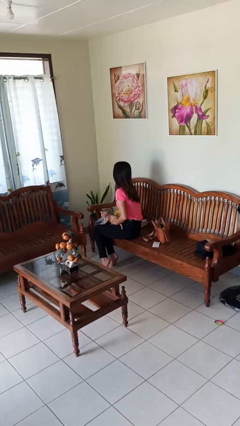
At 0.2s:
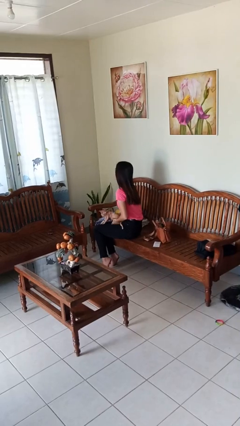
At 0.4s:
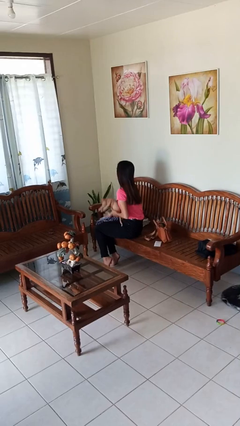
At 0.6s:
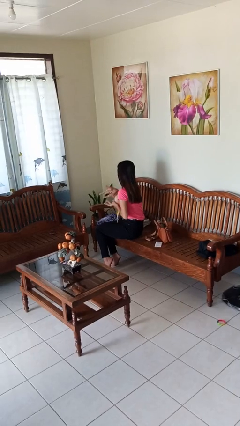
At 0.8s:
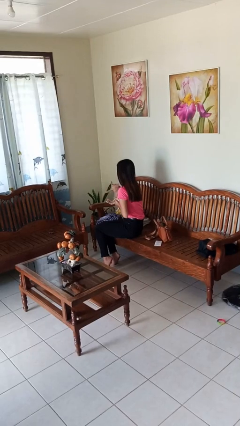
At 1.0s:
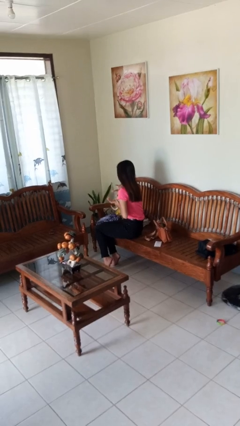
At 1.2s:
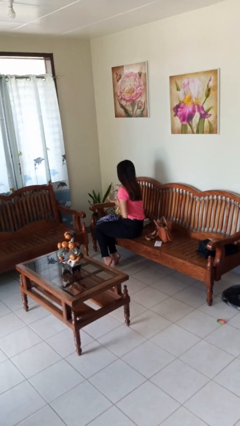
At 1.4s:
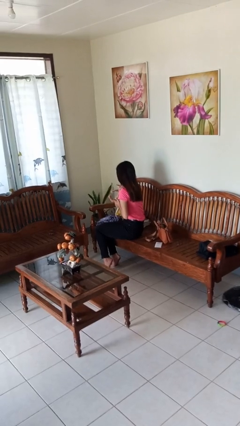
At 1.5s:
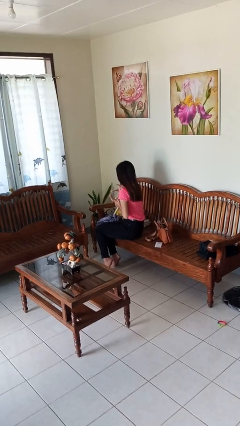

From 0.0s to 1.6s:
person hugs cat

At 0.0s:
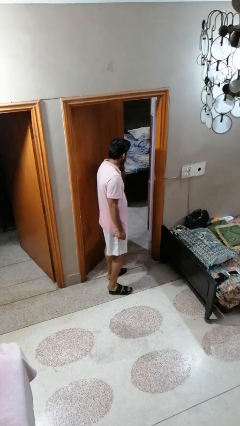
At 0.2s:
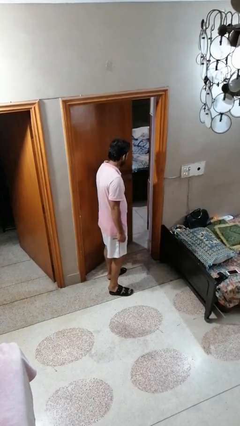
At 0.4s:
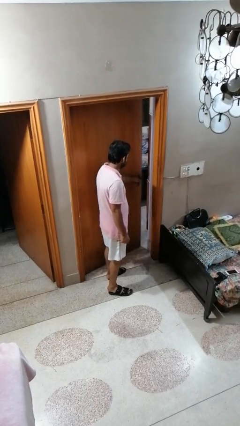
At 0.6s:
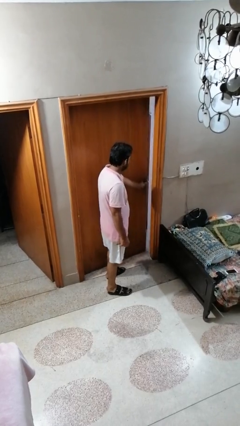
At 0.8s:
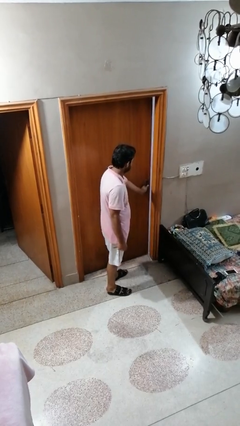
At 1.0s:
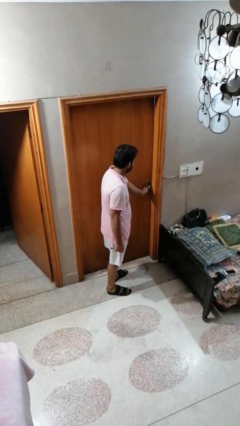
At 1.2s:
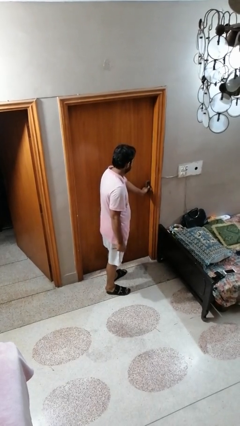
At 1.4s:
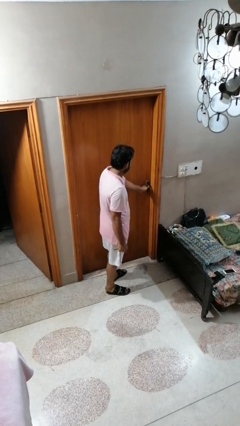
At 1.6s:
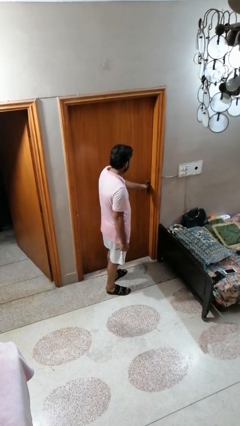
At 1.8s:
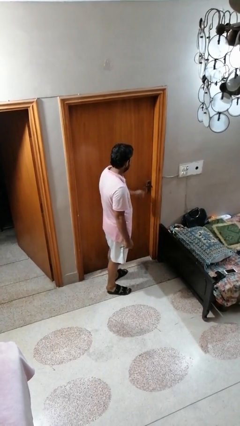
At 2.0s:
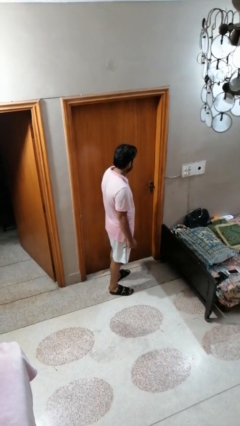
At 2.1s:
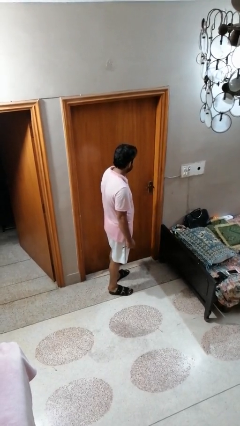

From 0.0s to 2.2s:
person closes facility door

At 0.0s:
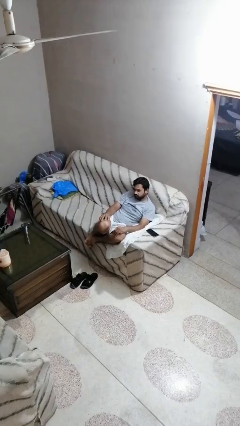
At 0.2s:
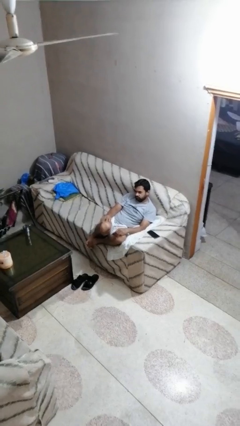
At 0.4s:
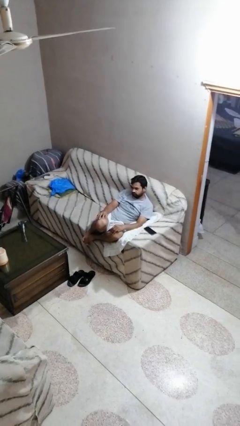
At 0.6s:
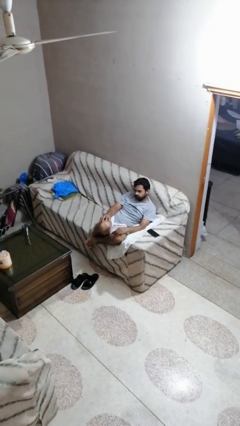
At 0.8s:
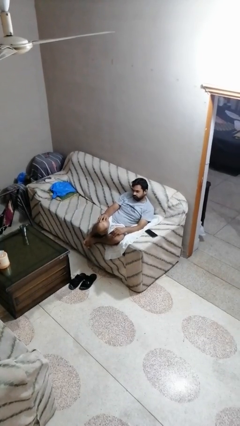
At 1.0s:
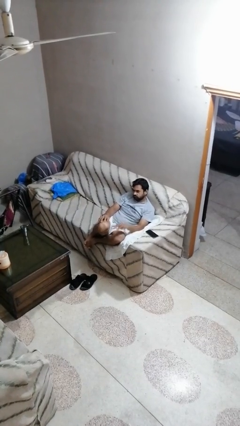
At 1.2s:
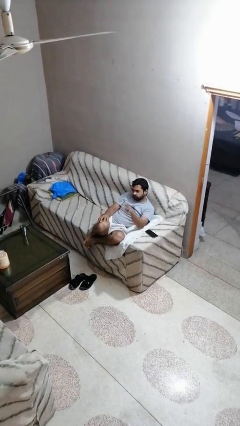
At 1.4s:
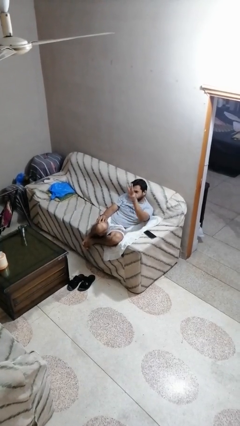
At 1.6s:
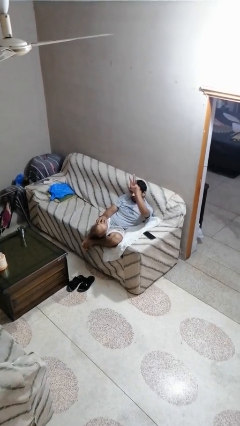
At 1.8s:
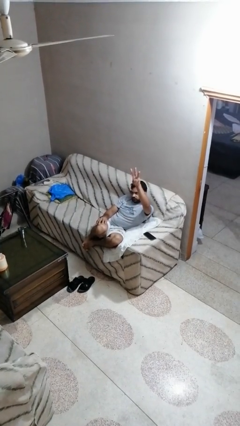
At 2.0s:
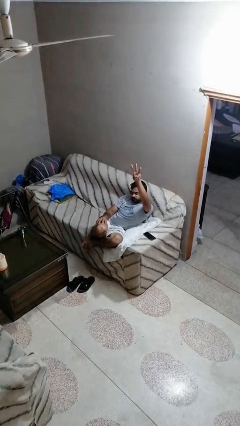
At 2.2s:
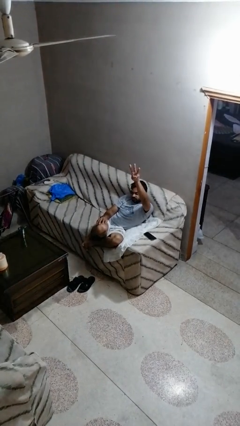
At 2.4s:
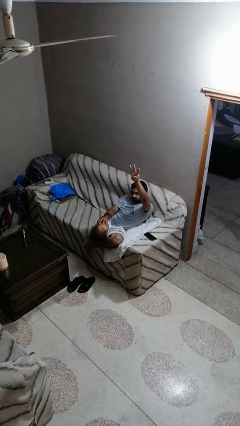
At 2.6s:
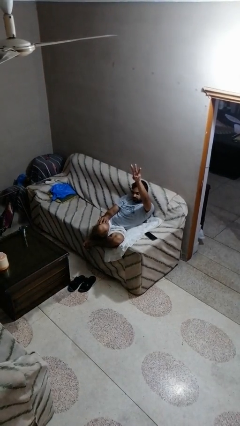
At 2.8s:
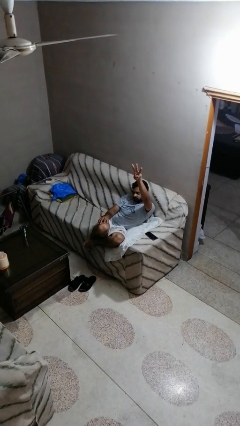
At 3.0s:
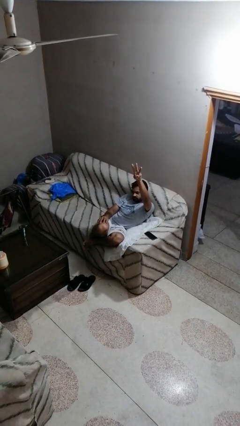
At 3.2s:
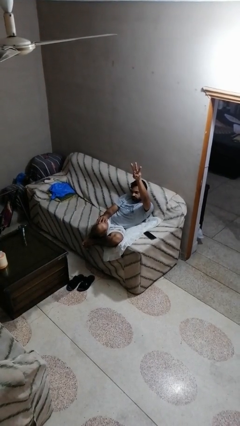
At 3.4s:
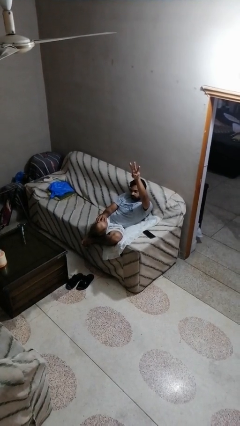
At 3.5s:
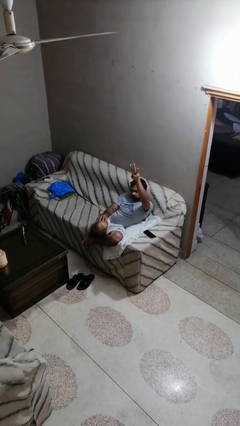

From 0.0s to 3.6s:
person gestures number three

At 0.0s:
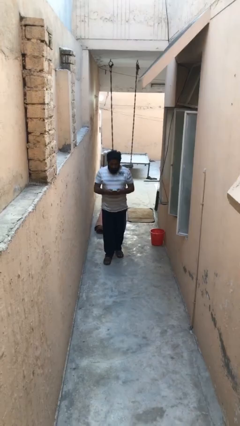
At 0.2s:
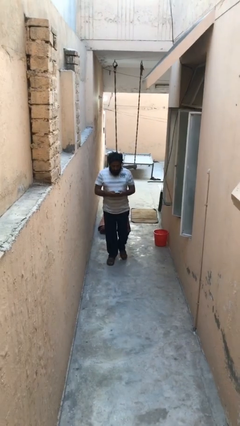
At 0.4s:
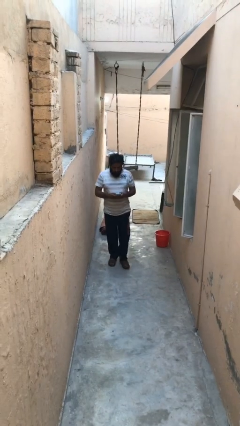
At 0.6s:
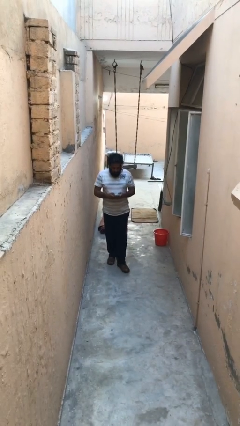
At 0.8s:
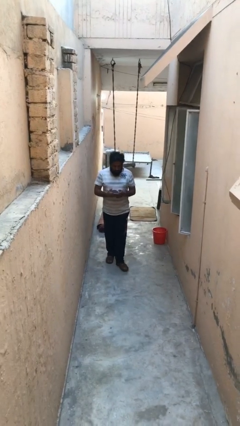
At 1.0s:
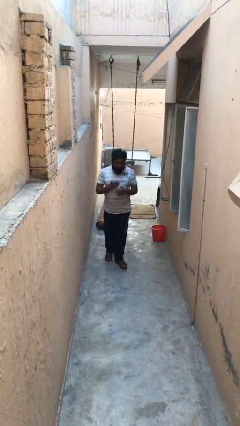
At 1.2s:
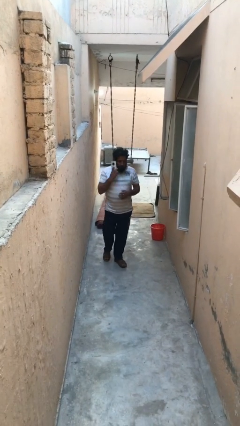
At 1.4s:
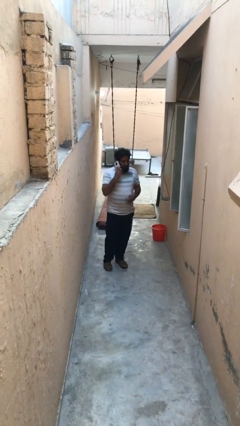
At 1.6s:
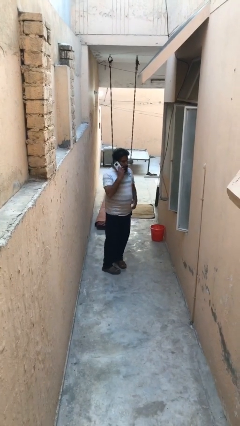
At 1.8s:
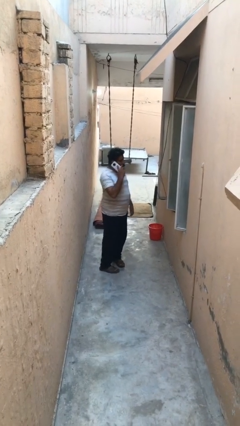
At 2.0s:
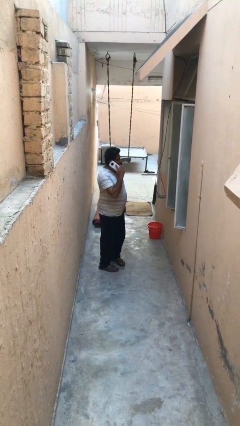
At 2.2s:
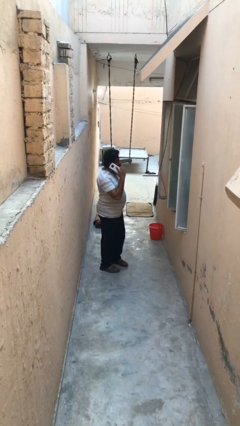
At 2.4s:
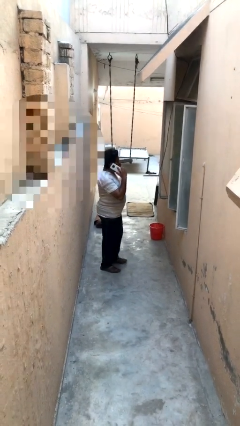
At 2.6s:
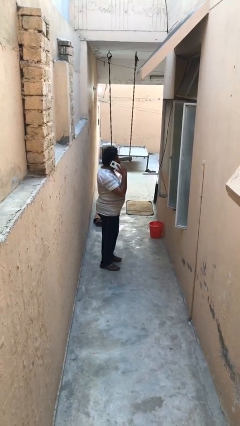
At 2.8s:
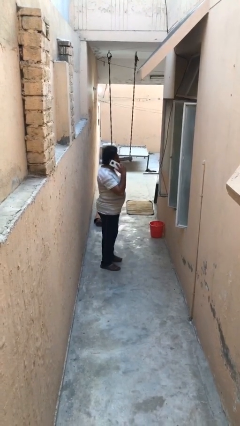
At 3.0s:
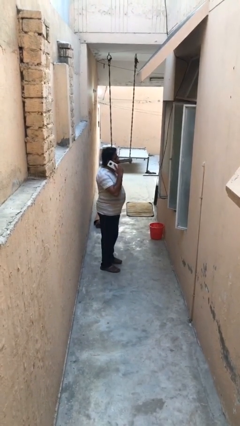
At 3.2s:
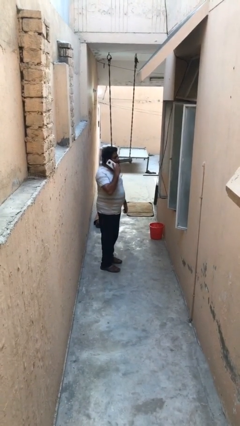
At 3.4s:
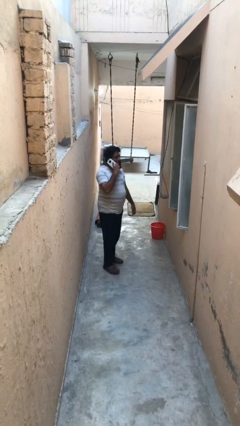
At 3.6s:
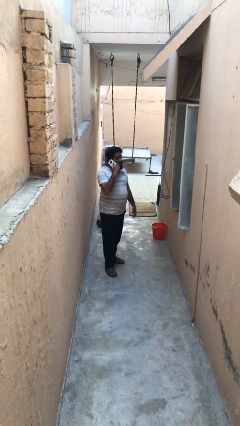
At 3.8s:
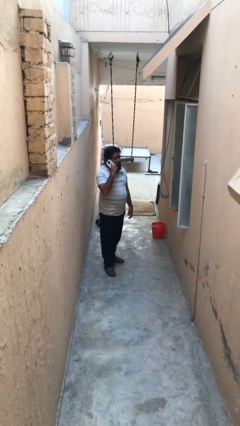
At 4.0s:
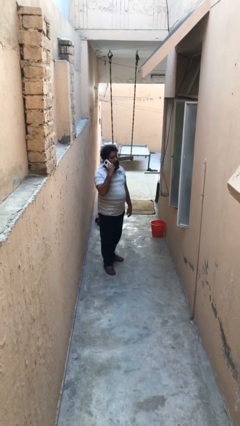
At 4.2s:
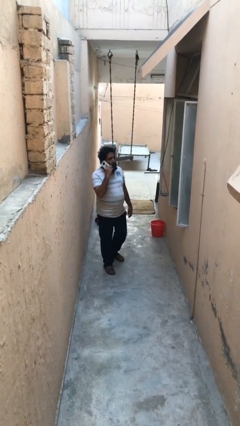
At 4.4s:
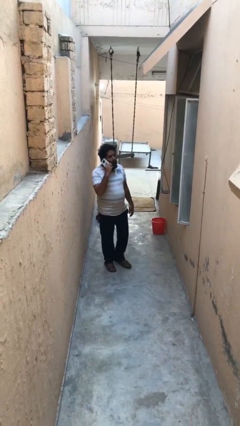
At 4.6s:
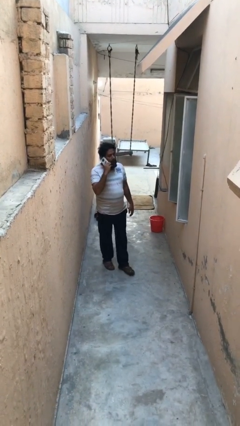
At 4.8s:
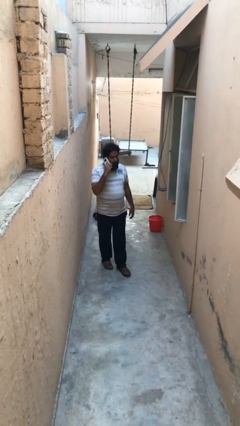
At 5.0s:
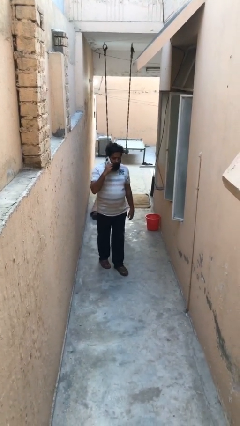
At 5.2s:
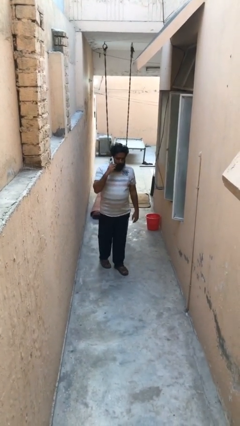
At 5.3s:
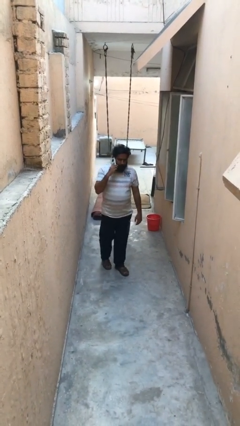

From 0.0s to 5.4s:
person talks on phone

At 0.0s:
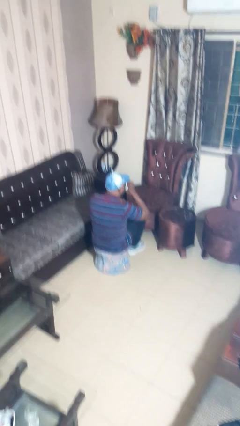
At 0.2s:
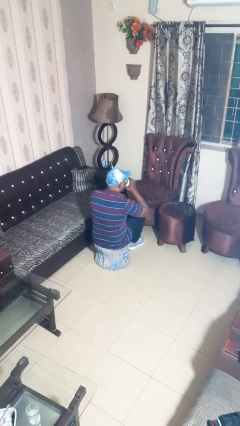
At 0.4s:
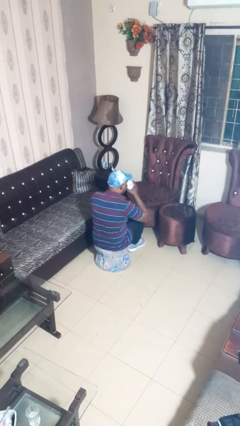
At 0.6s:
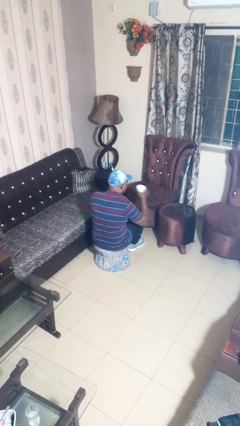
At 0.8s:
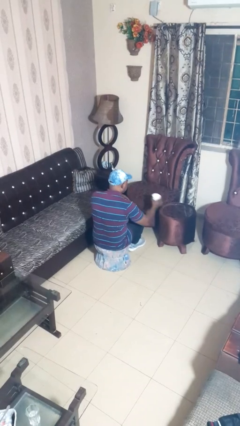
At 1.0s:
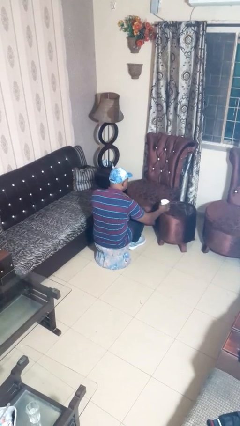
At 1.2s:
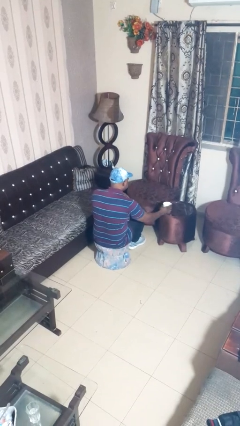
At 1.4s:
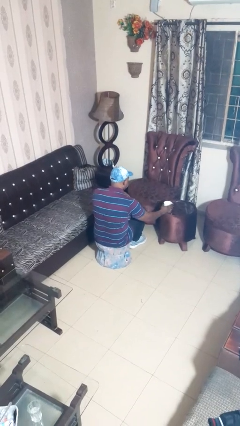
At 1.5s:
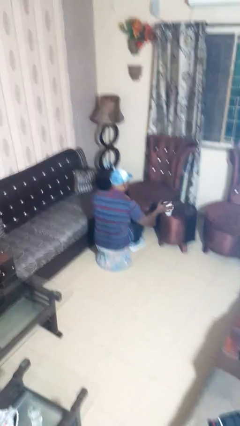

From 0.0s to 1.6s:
person puts down object on table

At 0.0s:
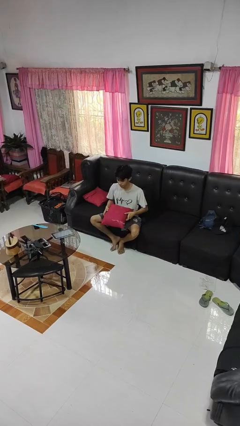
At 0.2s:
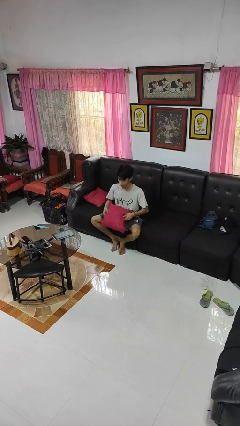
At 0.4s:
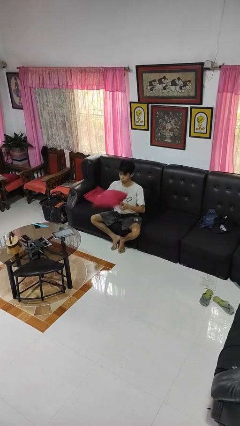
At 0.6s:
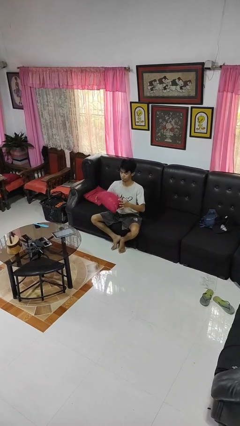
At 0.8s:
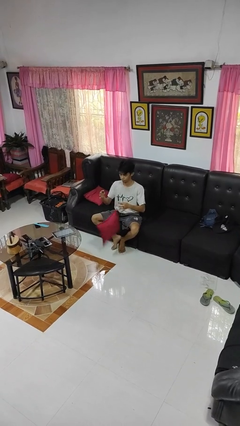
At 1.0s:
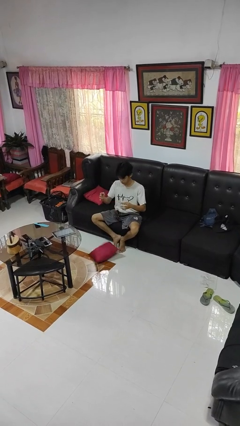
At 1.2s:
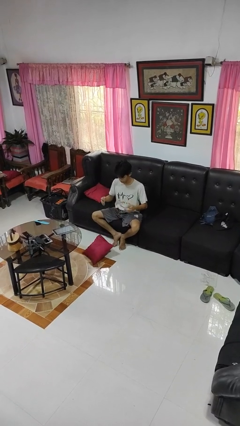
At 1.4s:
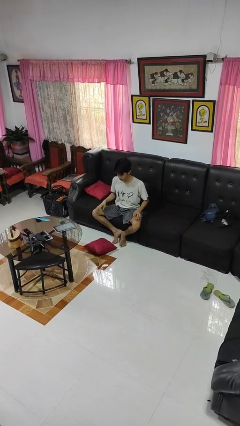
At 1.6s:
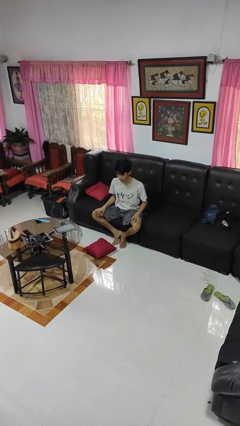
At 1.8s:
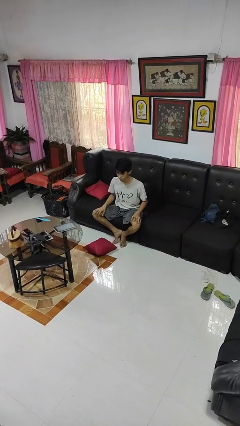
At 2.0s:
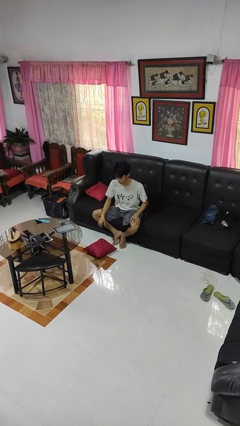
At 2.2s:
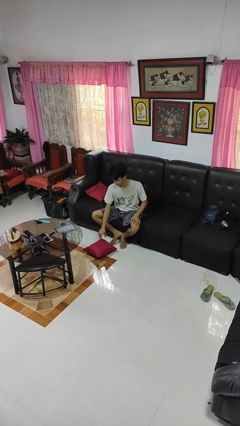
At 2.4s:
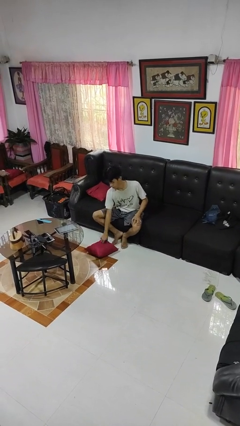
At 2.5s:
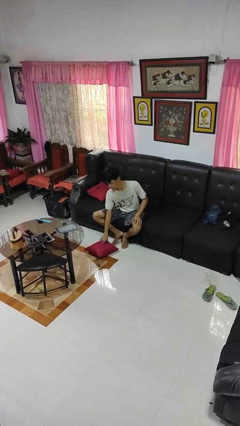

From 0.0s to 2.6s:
person drops object

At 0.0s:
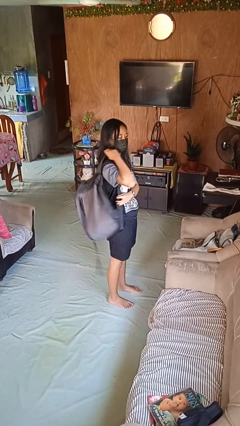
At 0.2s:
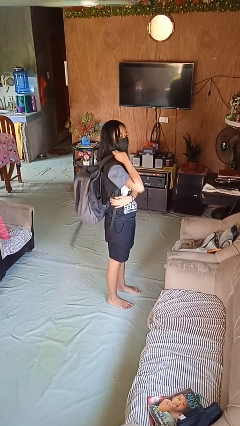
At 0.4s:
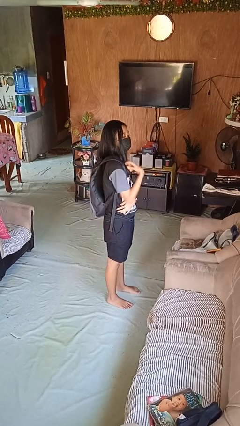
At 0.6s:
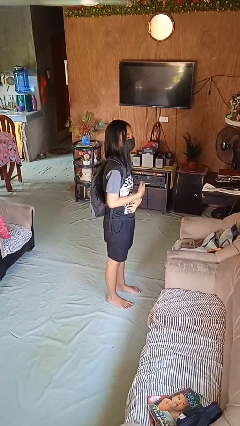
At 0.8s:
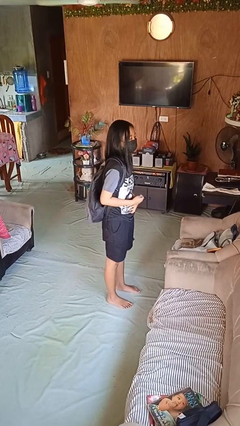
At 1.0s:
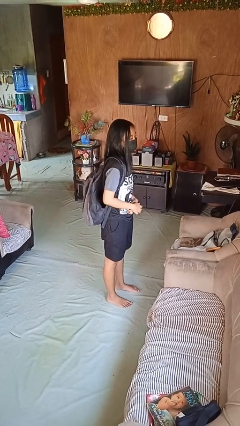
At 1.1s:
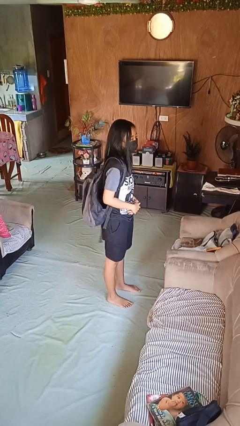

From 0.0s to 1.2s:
person puts on backpack
